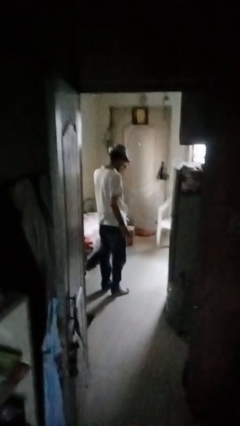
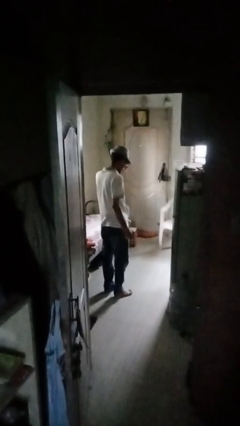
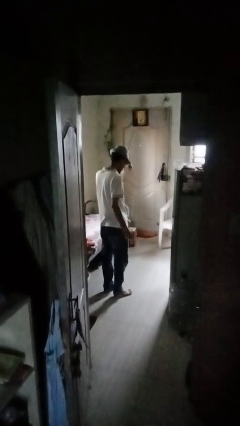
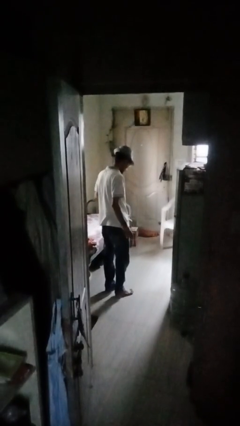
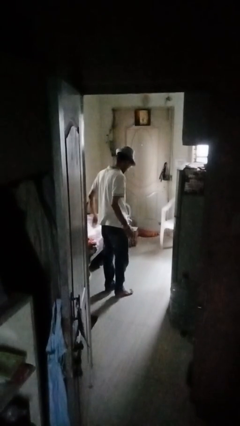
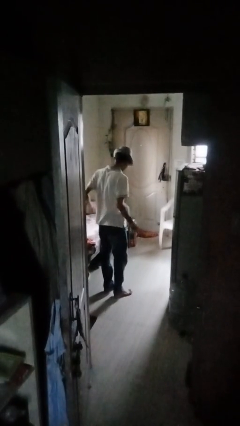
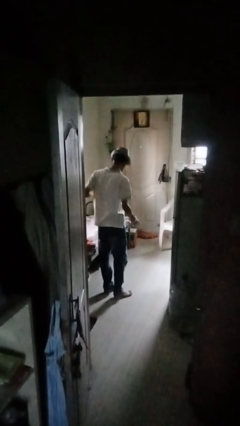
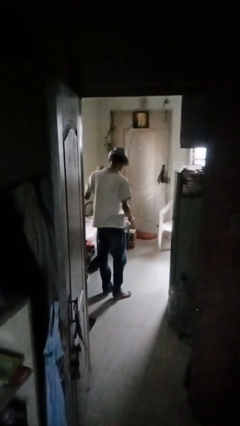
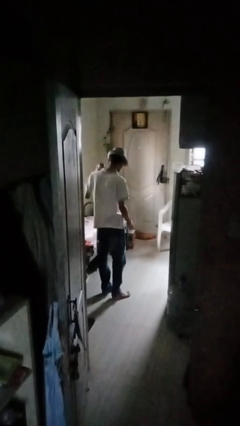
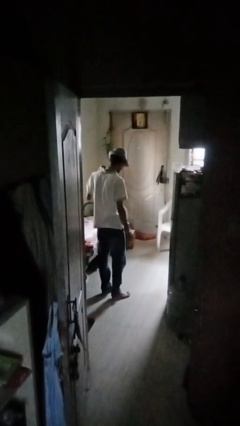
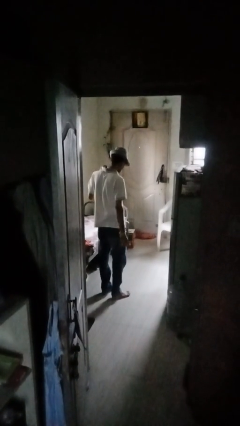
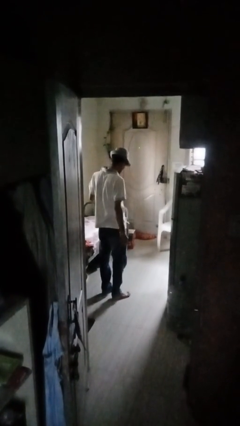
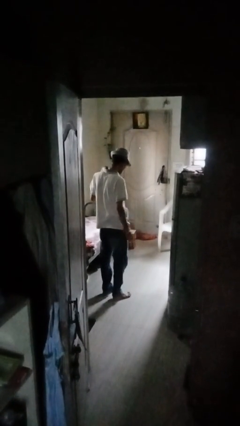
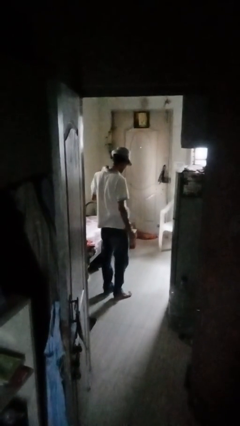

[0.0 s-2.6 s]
person bounces ball on floor

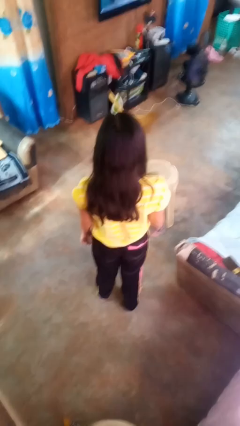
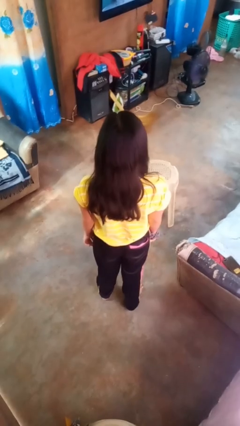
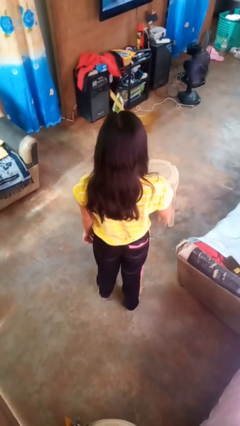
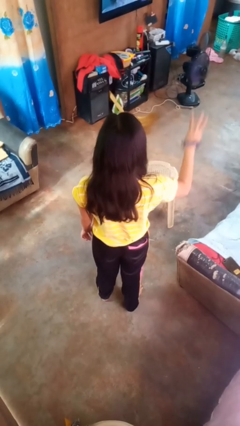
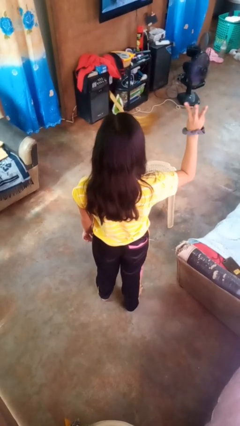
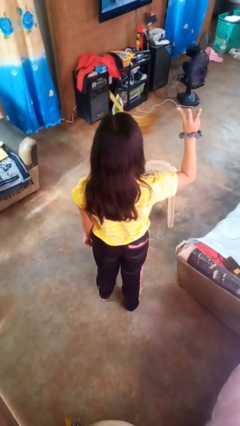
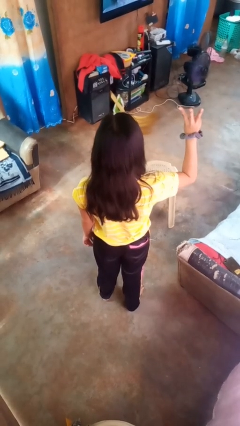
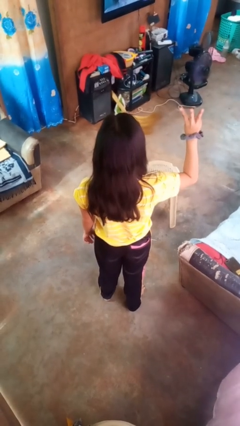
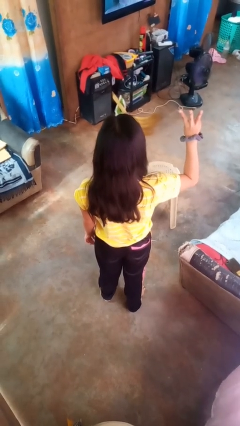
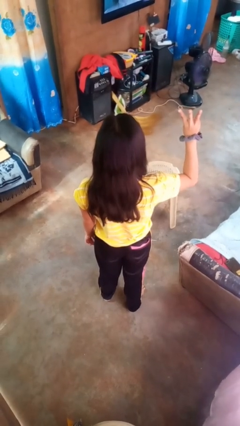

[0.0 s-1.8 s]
person gestures number three

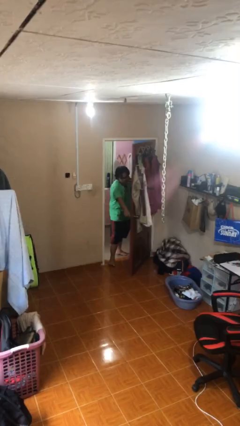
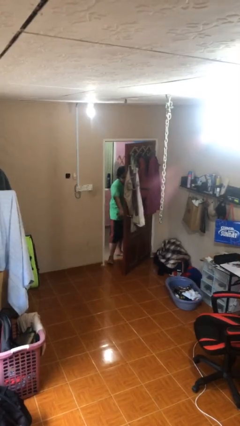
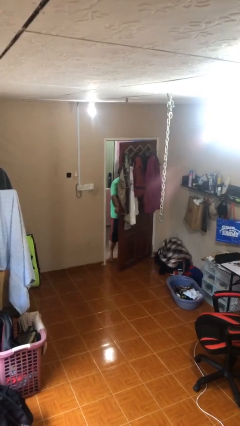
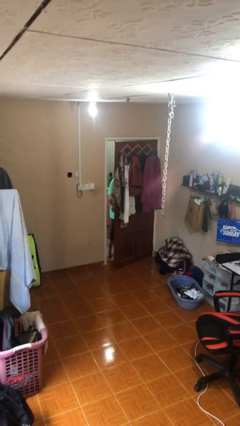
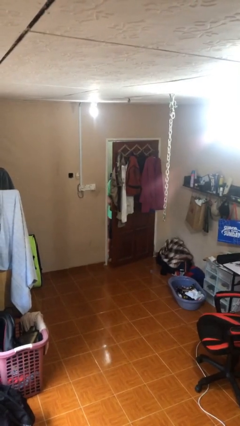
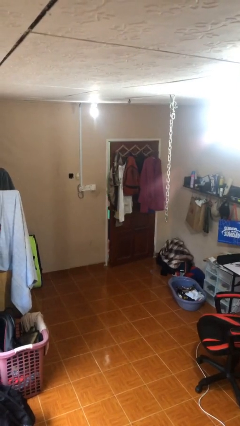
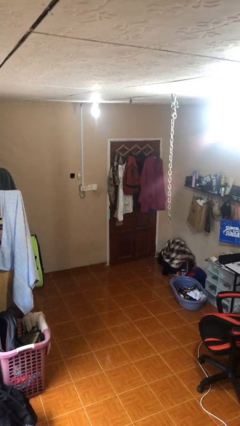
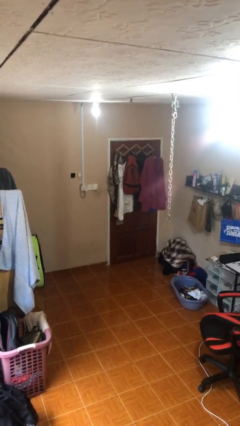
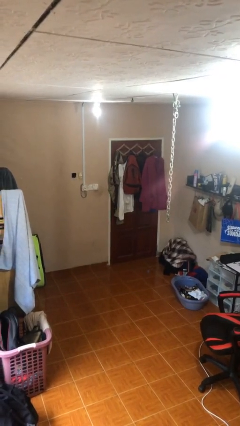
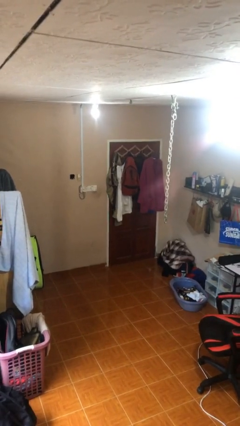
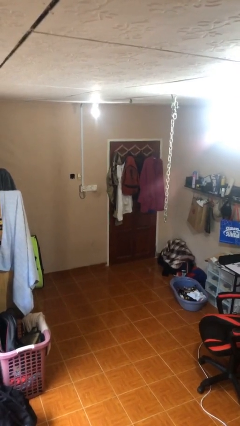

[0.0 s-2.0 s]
person closes facility door

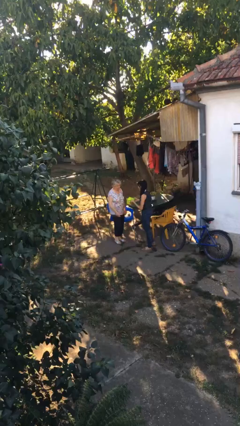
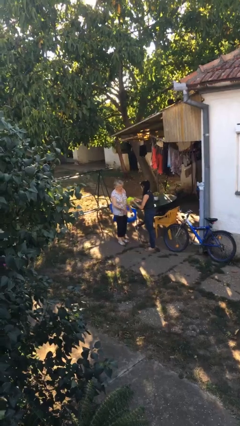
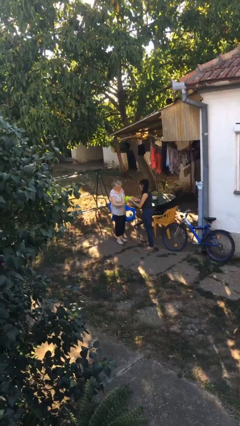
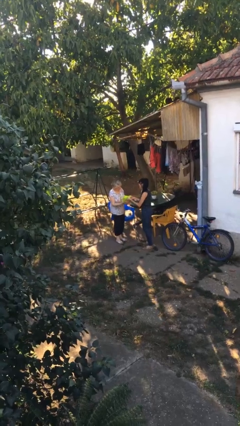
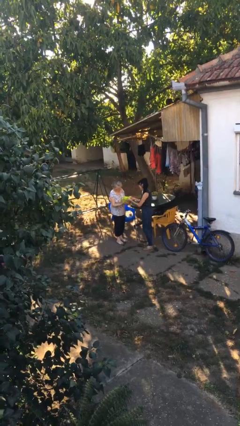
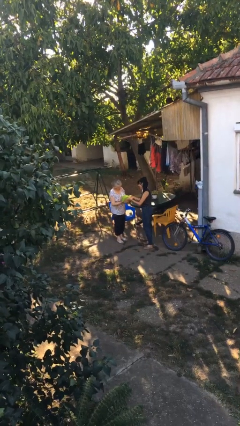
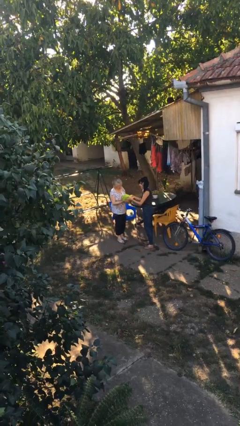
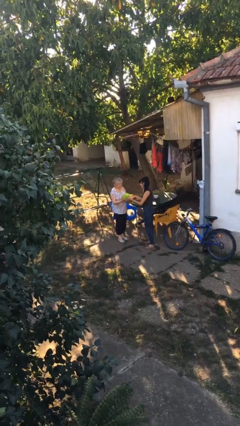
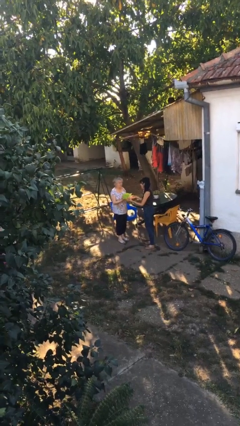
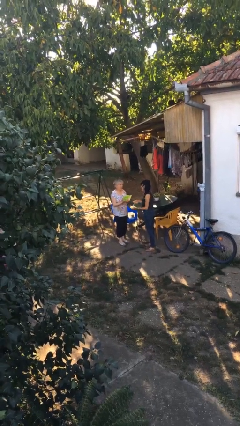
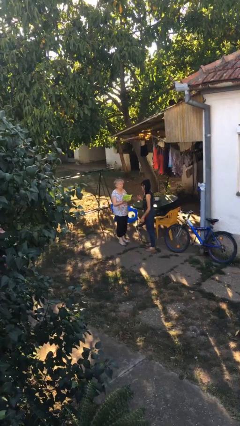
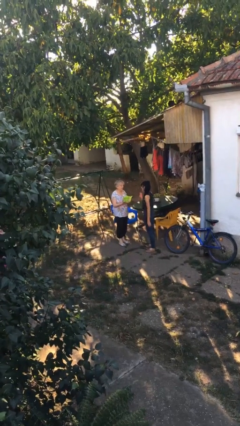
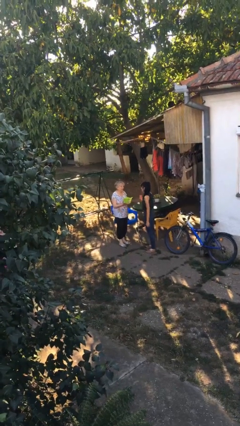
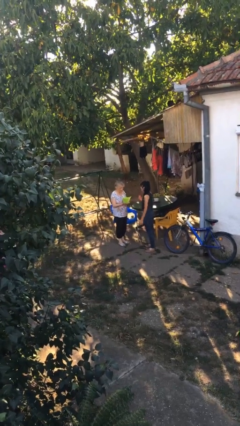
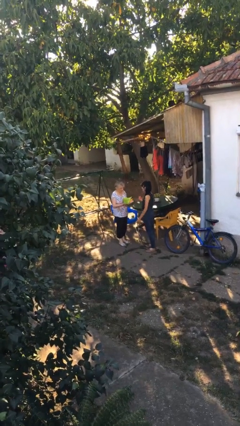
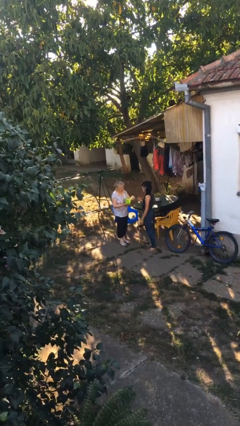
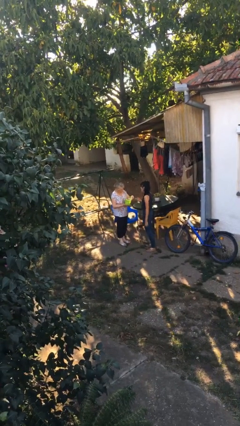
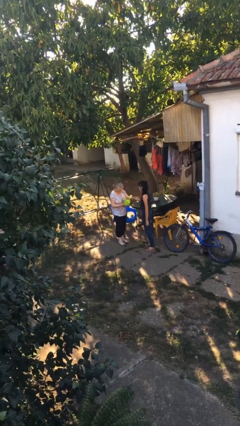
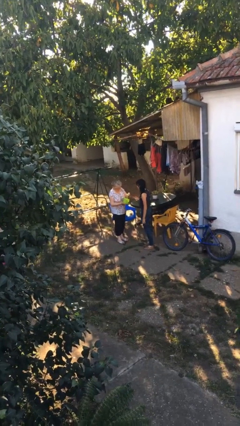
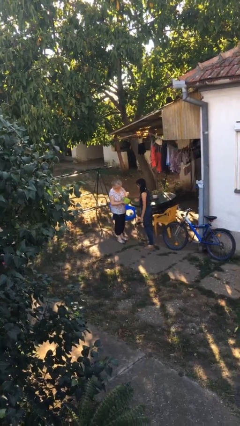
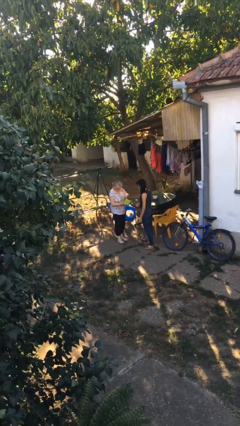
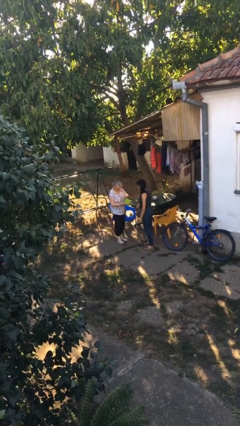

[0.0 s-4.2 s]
person transfers object to person

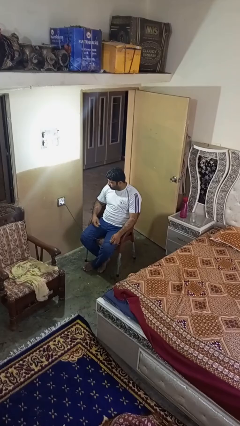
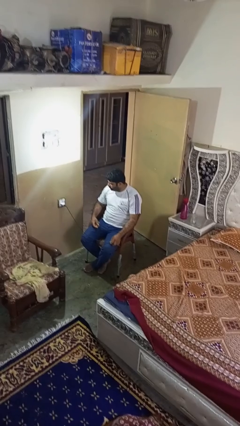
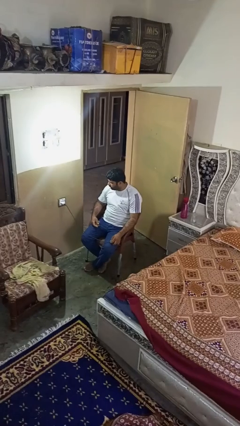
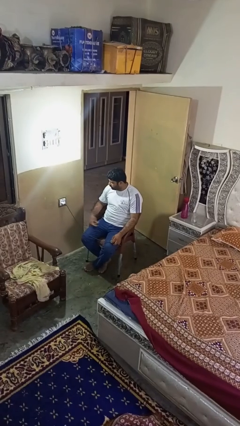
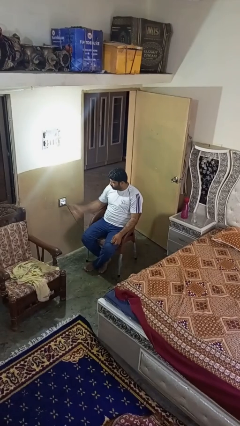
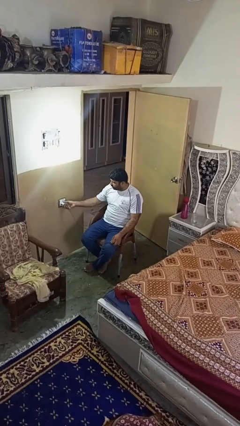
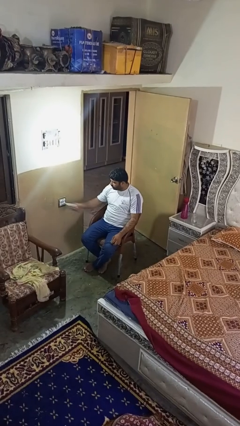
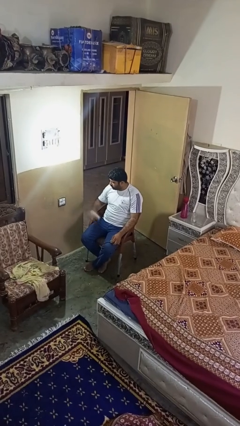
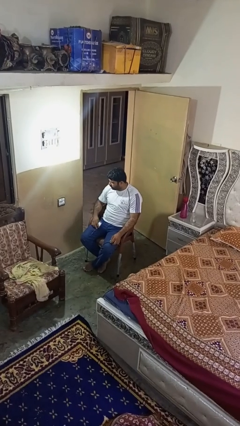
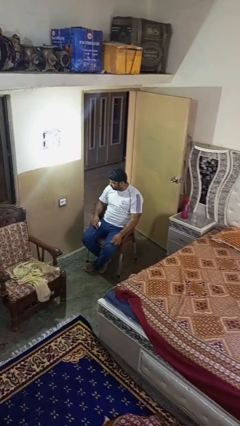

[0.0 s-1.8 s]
person unplugs from electrical socket

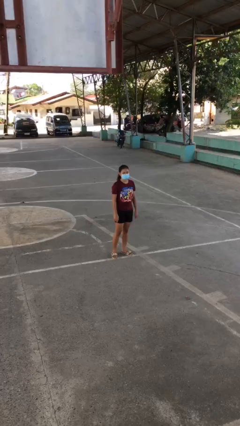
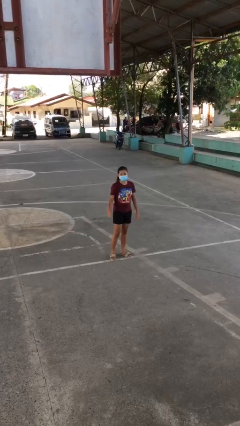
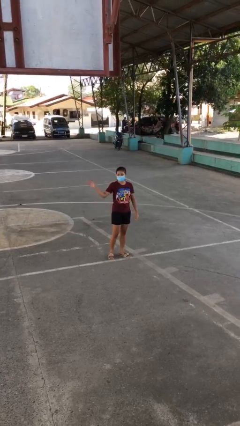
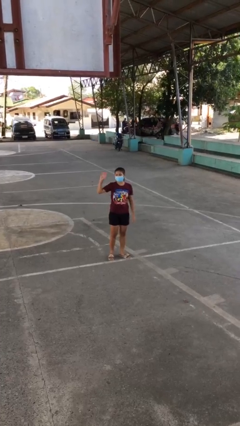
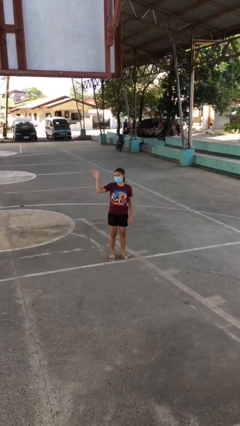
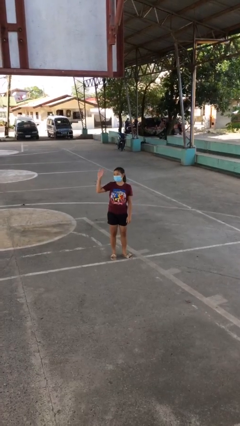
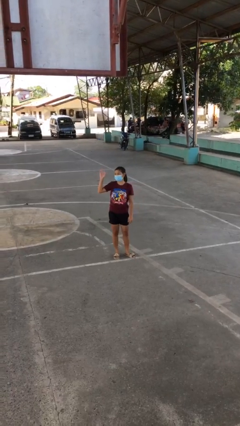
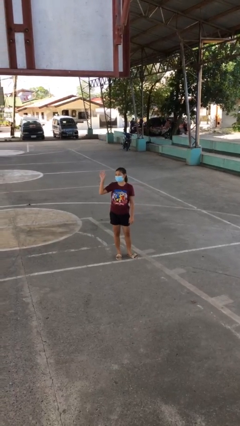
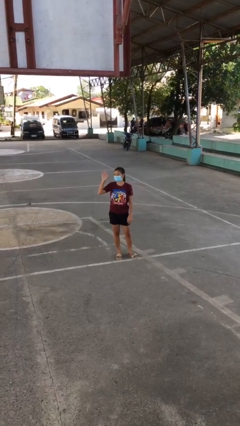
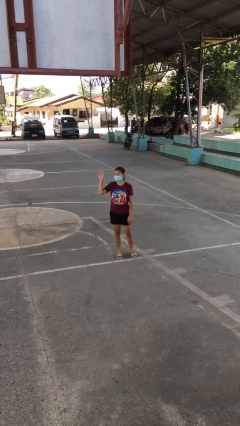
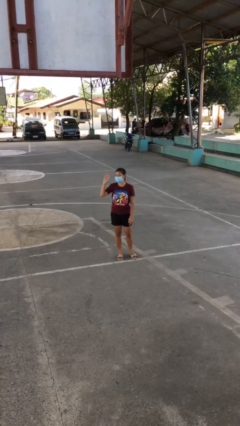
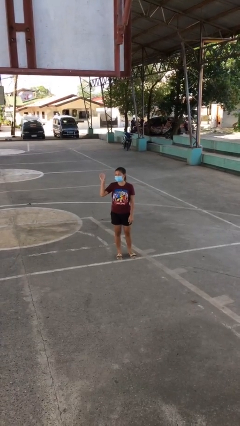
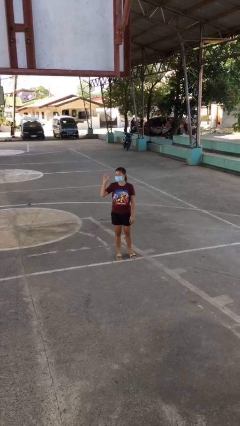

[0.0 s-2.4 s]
person waves at person

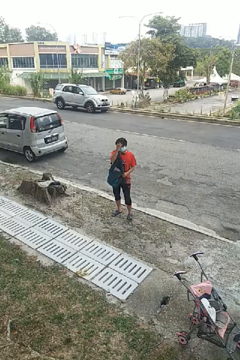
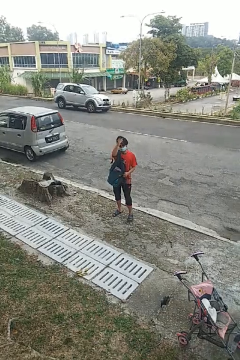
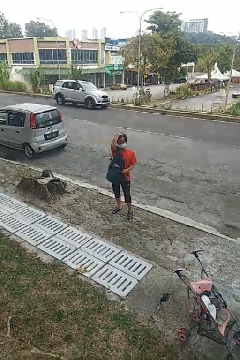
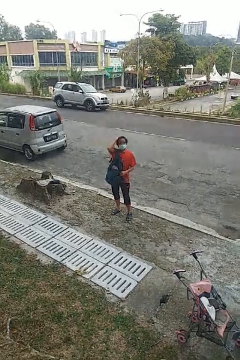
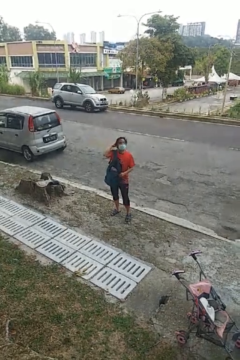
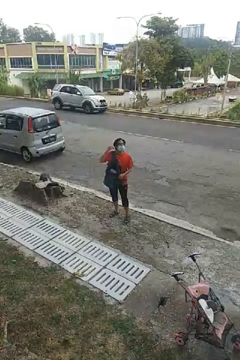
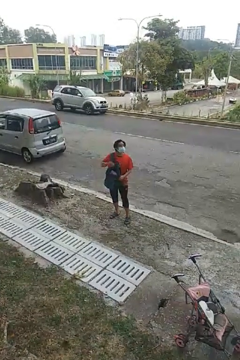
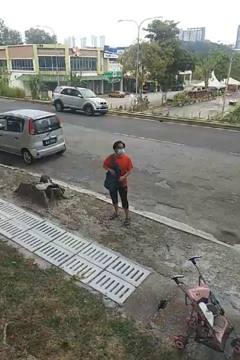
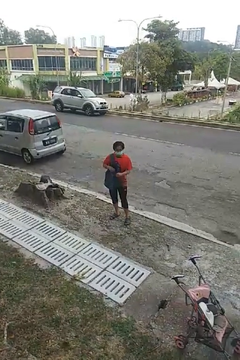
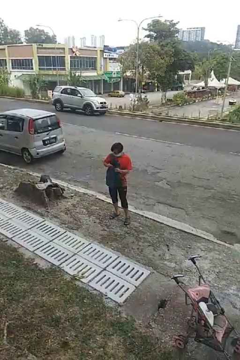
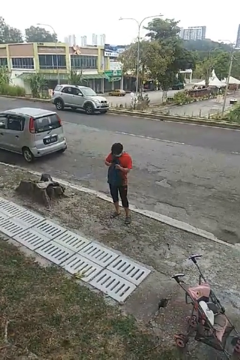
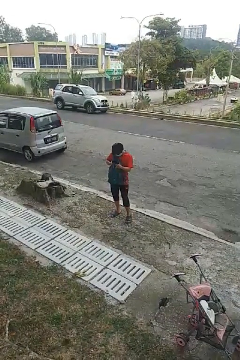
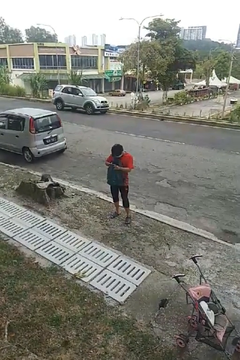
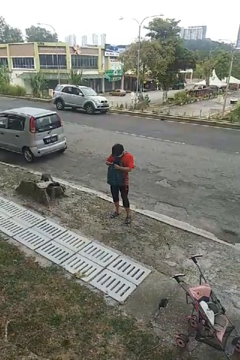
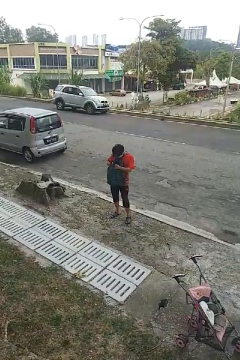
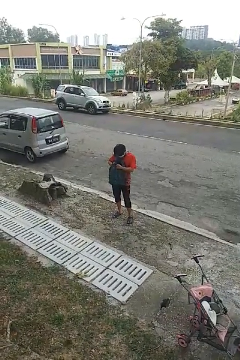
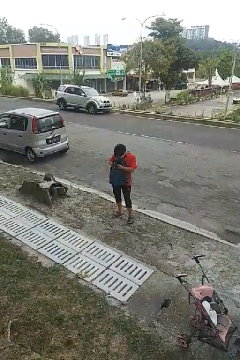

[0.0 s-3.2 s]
person searches in backpack
